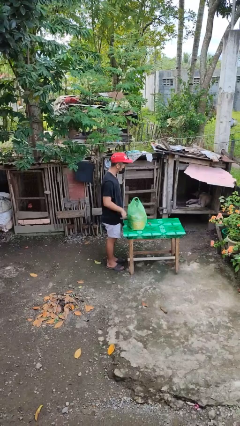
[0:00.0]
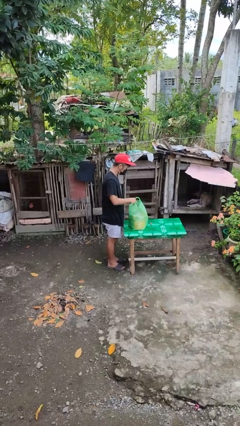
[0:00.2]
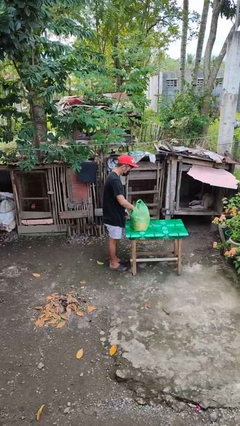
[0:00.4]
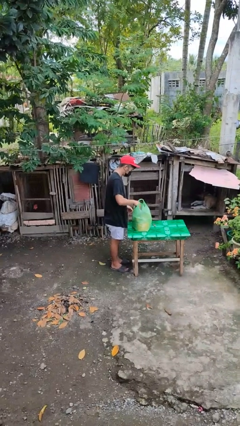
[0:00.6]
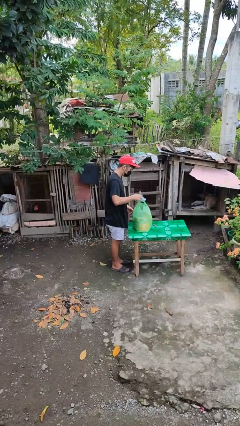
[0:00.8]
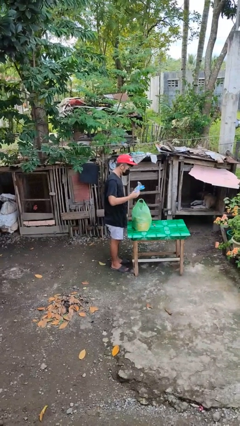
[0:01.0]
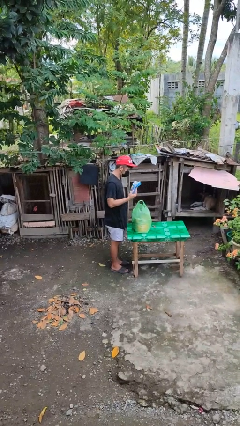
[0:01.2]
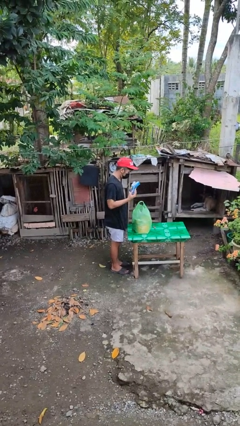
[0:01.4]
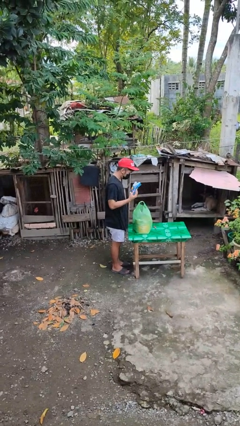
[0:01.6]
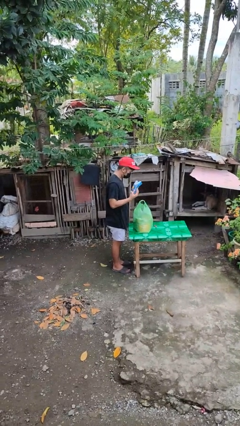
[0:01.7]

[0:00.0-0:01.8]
person takes object from bag

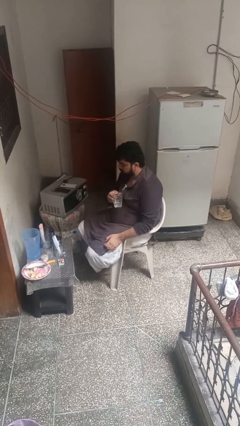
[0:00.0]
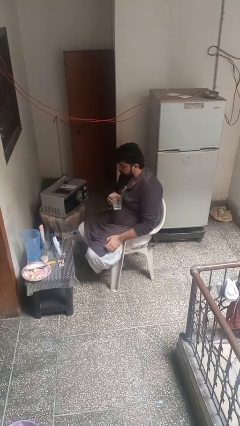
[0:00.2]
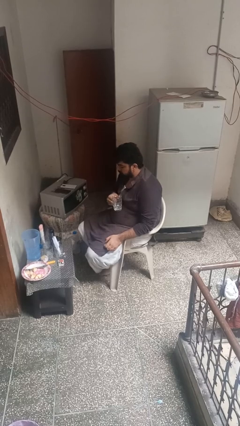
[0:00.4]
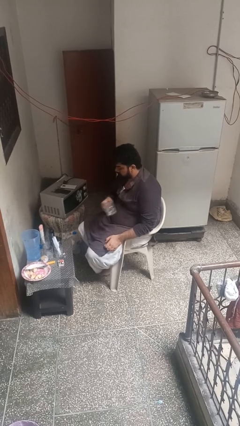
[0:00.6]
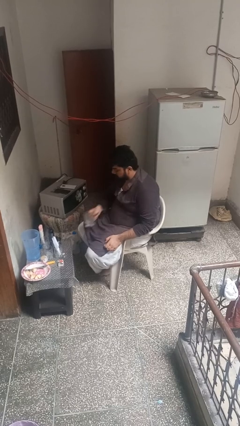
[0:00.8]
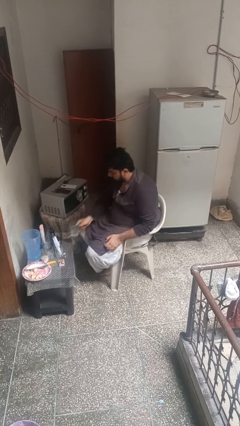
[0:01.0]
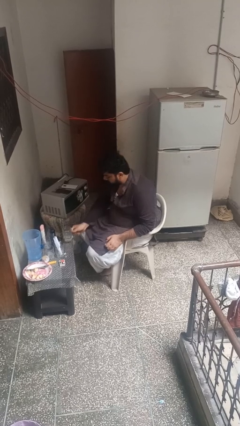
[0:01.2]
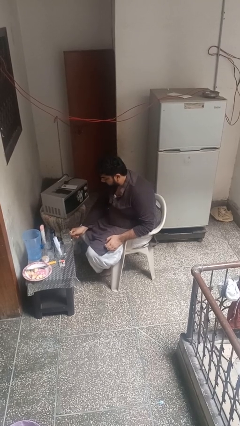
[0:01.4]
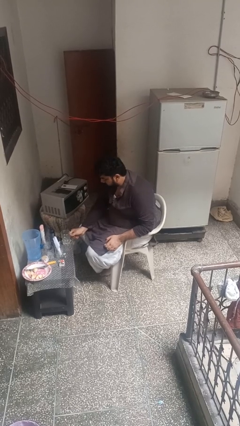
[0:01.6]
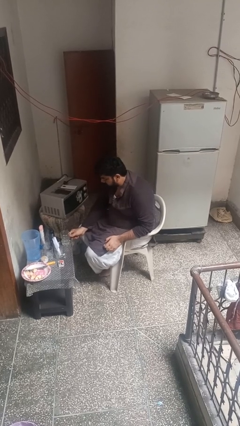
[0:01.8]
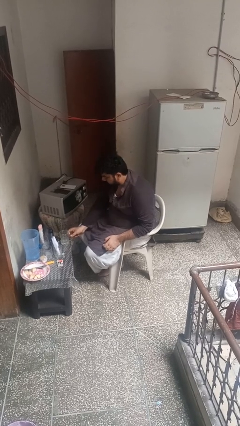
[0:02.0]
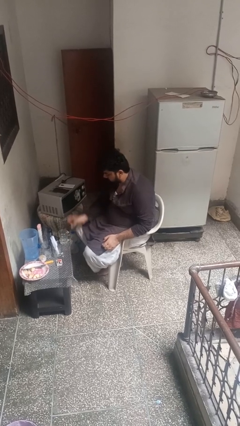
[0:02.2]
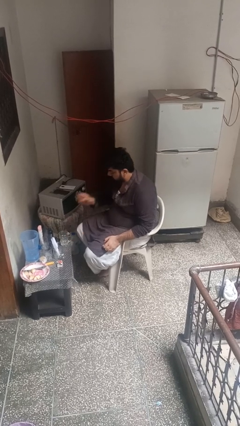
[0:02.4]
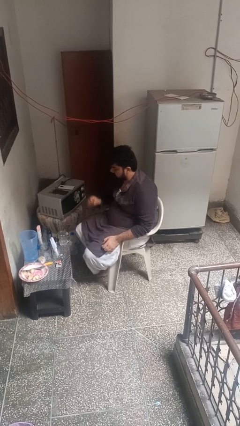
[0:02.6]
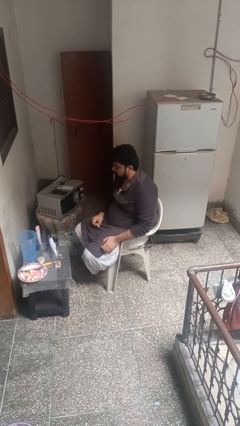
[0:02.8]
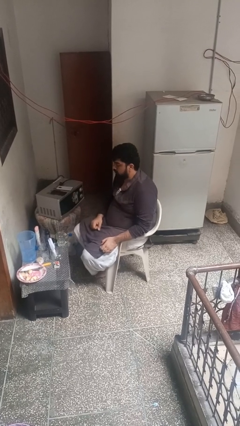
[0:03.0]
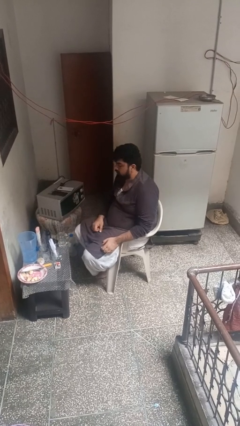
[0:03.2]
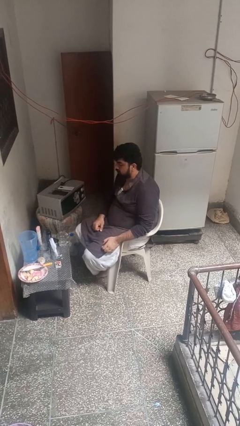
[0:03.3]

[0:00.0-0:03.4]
person puts down object on table

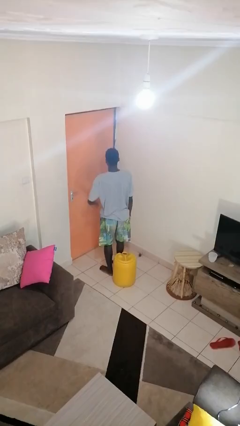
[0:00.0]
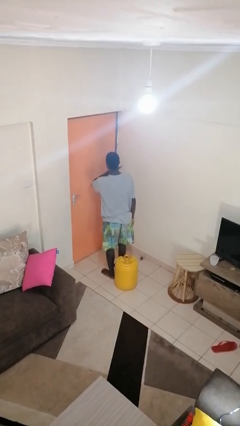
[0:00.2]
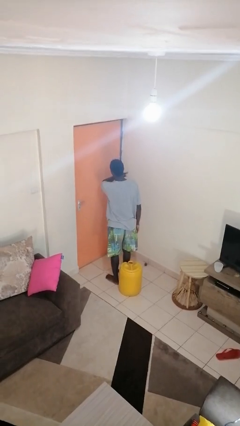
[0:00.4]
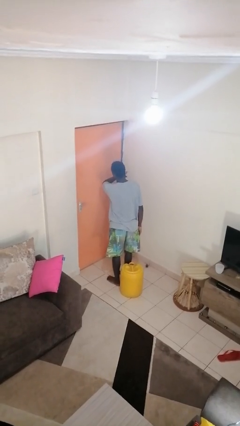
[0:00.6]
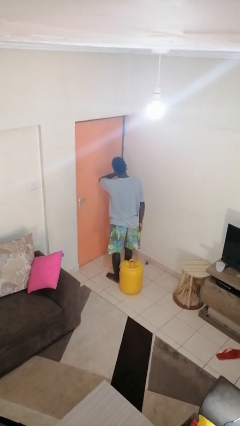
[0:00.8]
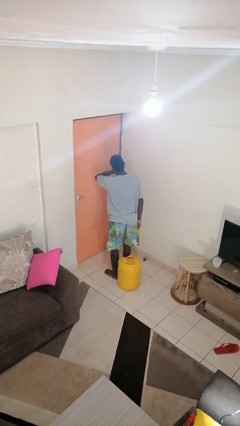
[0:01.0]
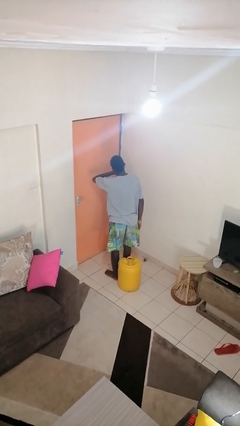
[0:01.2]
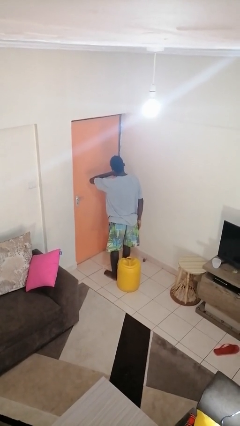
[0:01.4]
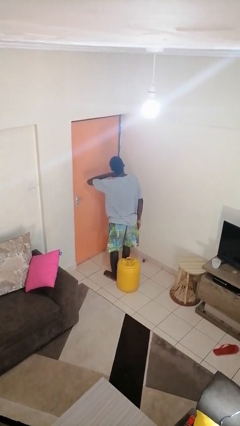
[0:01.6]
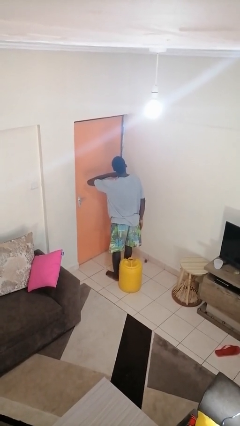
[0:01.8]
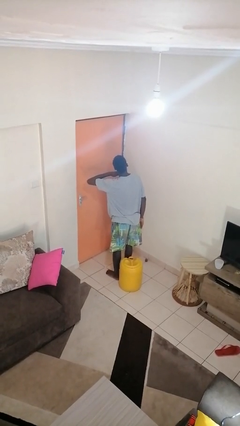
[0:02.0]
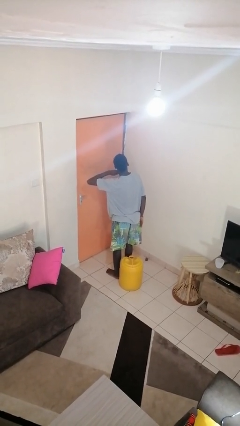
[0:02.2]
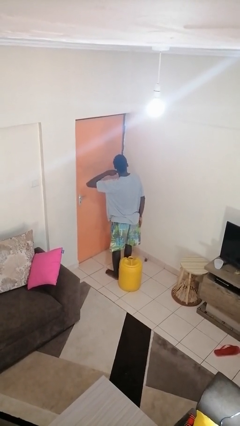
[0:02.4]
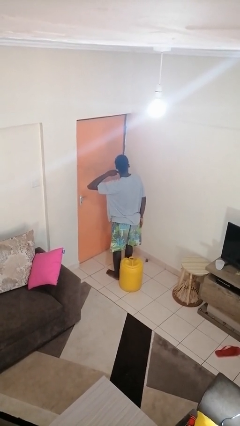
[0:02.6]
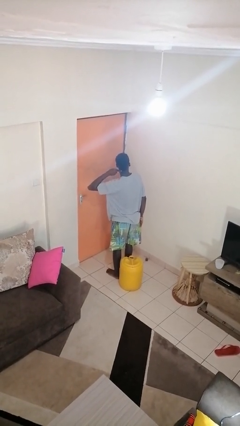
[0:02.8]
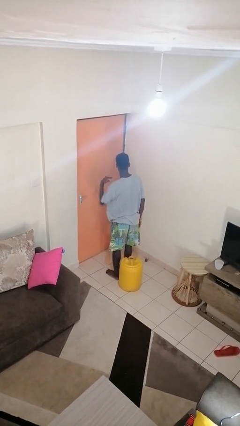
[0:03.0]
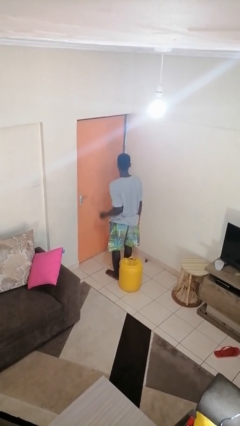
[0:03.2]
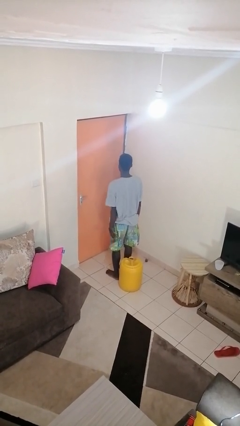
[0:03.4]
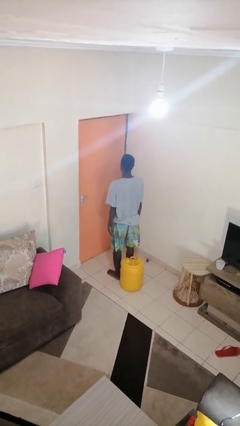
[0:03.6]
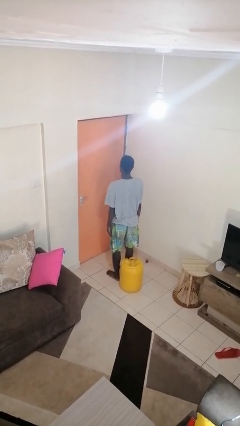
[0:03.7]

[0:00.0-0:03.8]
person gestures cut

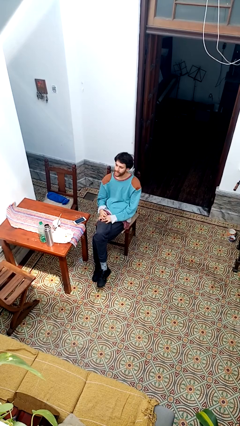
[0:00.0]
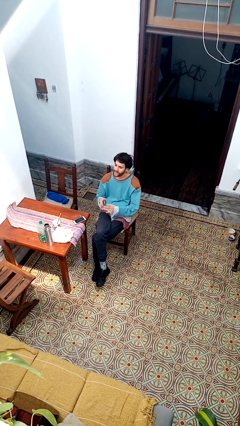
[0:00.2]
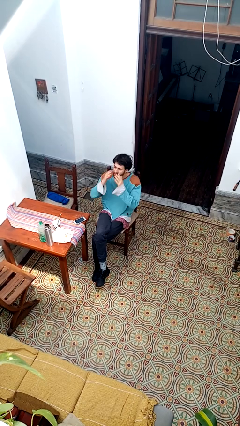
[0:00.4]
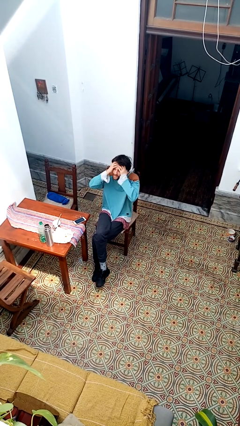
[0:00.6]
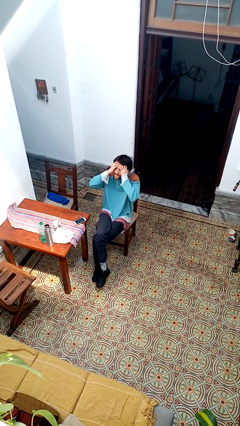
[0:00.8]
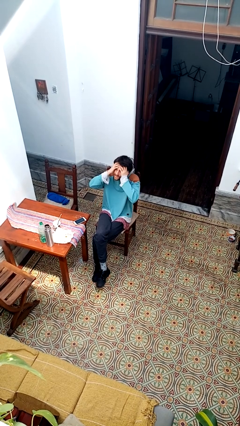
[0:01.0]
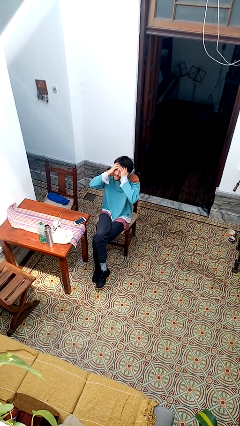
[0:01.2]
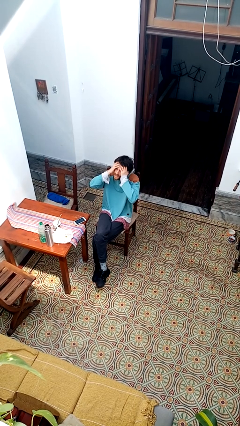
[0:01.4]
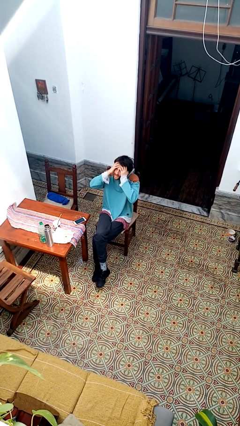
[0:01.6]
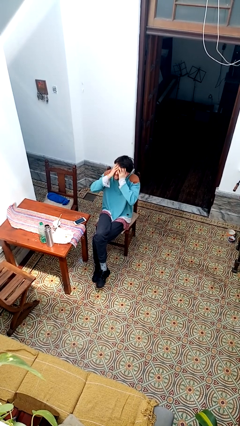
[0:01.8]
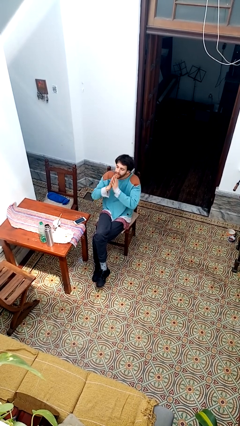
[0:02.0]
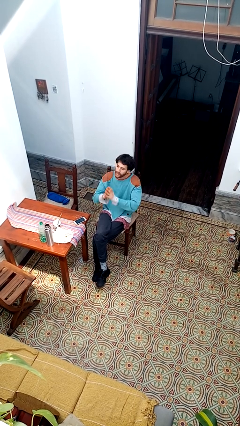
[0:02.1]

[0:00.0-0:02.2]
person covers face with hands

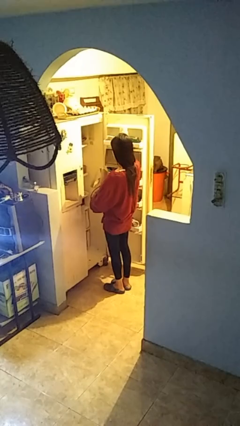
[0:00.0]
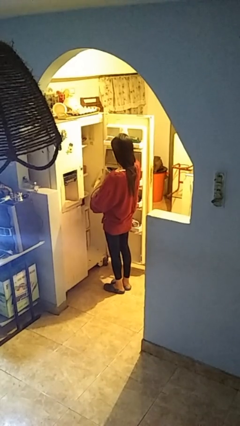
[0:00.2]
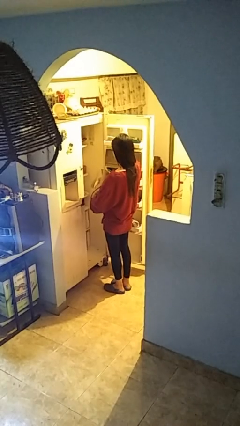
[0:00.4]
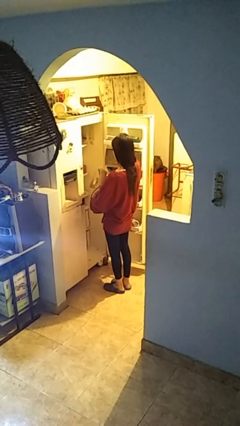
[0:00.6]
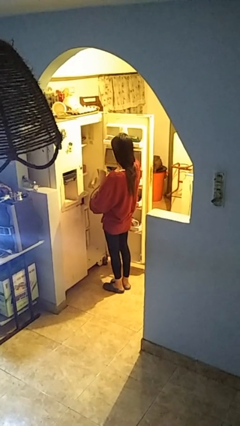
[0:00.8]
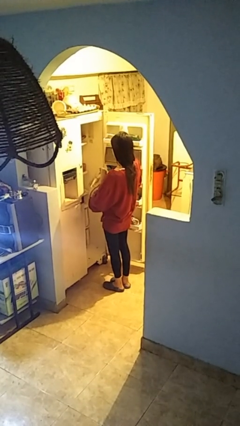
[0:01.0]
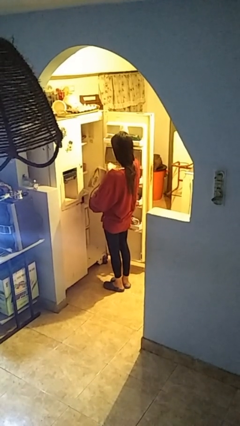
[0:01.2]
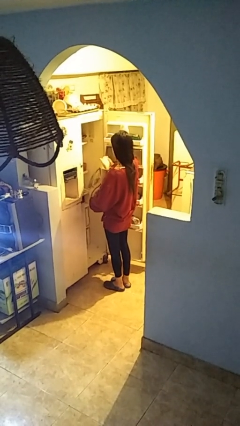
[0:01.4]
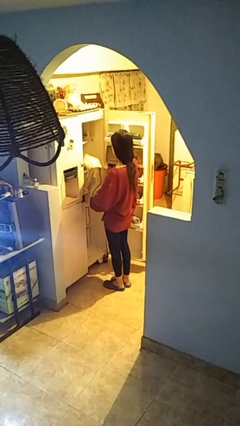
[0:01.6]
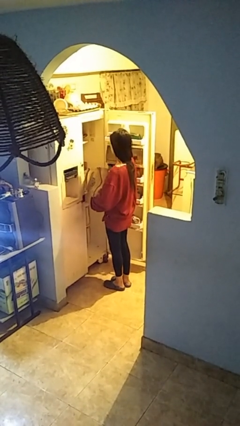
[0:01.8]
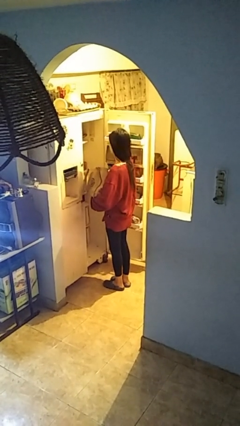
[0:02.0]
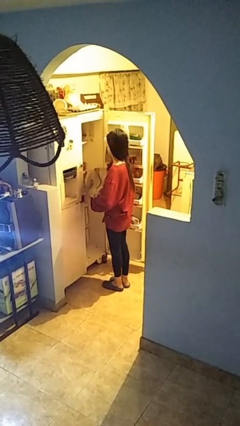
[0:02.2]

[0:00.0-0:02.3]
person loads groceries into refrigerator

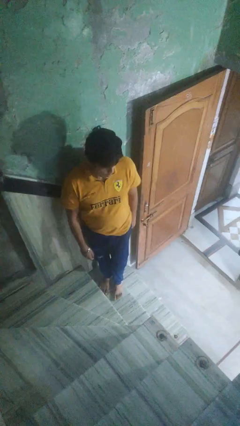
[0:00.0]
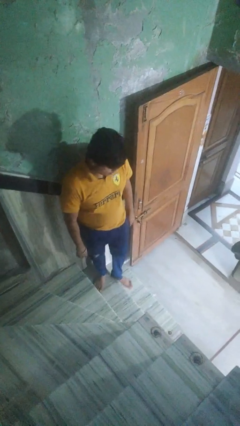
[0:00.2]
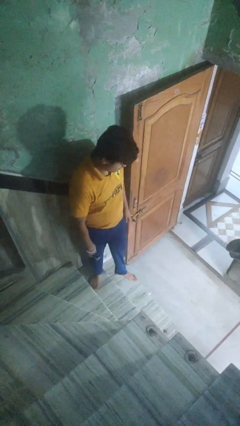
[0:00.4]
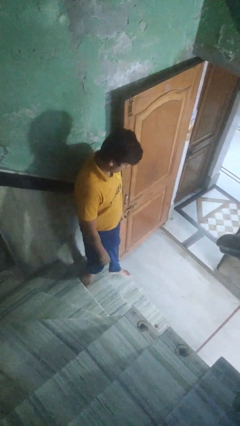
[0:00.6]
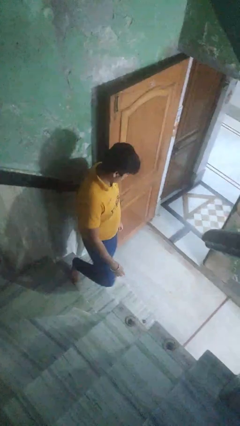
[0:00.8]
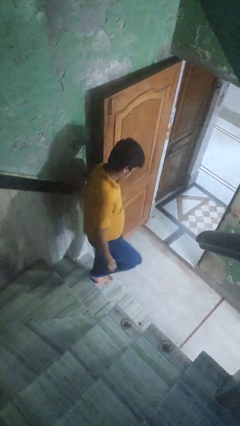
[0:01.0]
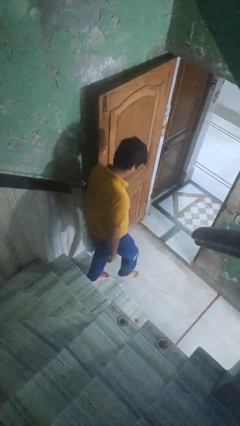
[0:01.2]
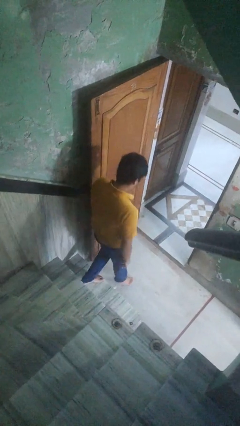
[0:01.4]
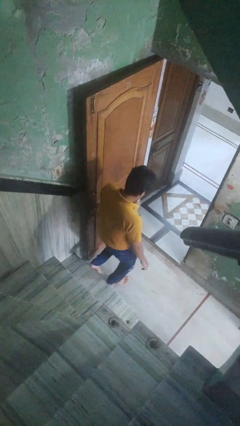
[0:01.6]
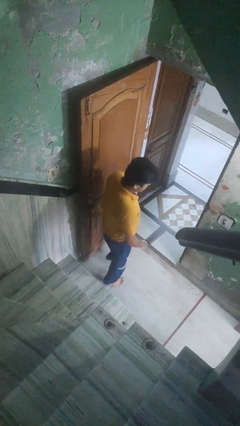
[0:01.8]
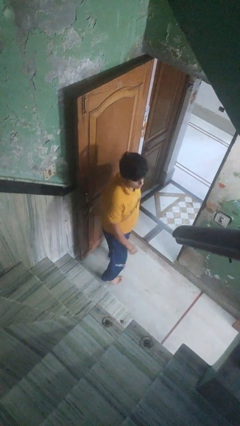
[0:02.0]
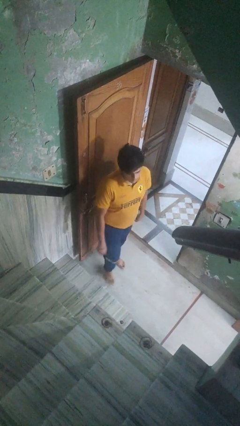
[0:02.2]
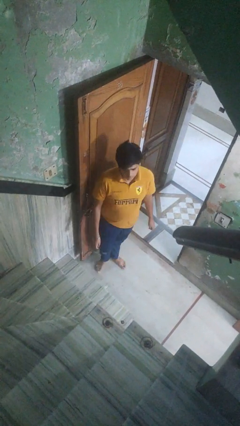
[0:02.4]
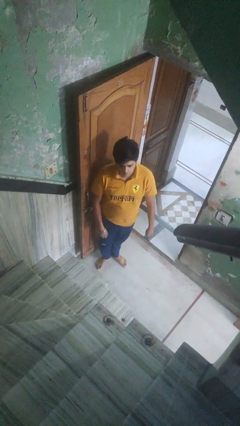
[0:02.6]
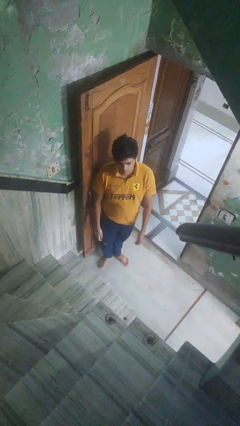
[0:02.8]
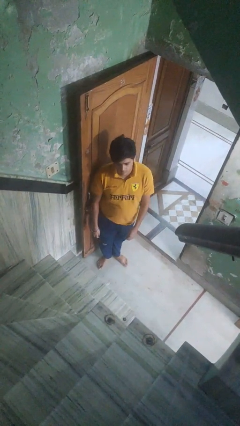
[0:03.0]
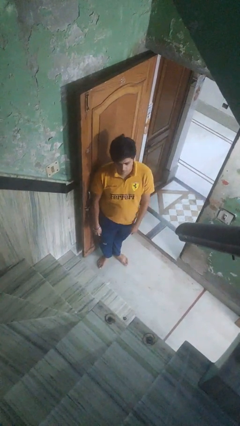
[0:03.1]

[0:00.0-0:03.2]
person climbs down stairs

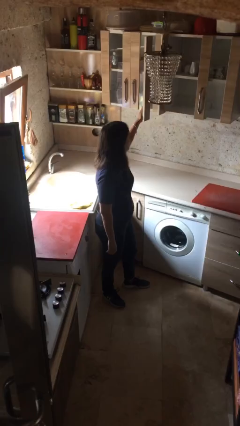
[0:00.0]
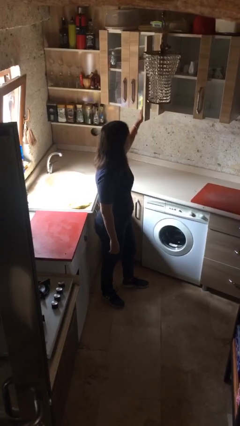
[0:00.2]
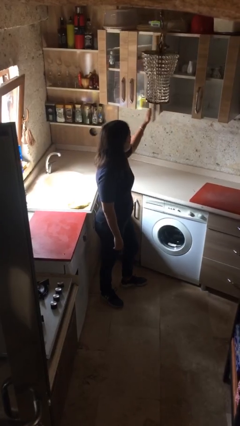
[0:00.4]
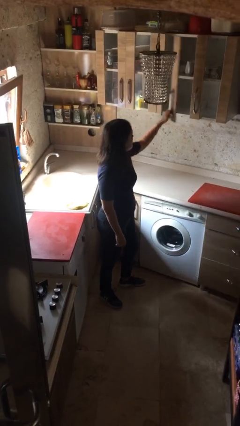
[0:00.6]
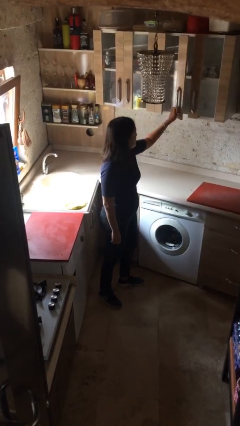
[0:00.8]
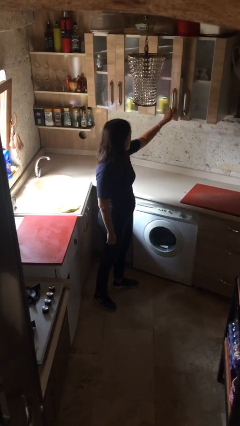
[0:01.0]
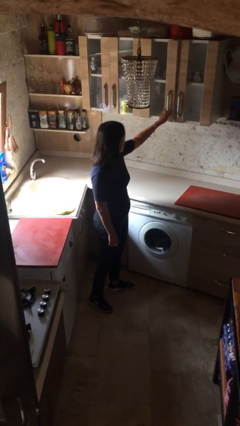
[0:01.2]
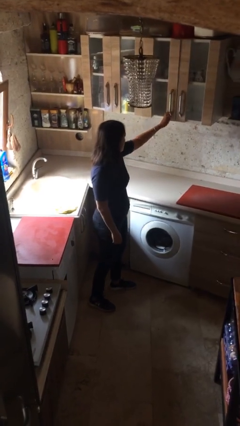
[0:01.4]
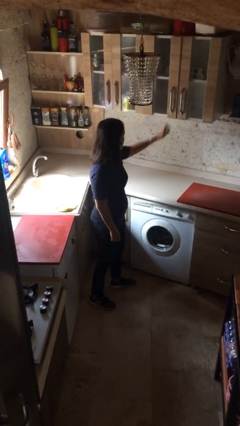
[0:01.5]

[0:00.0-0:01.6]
person closes cabinet
